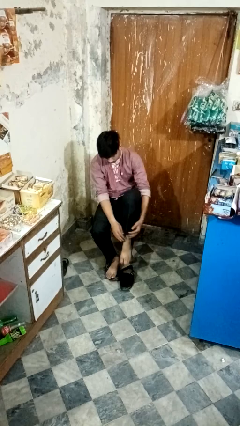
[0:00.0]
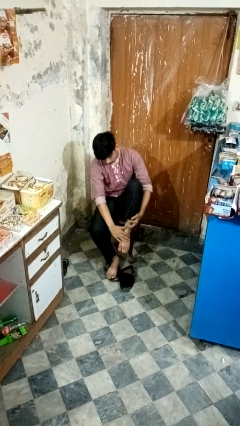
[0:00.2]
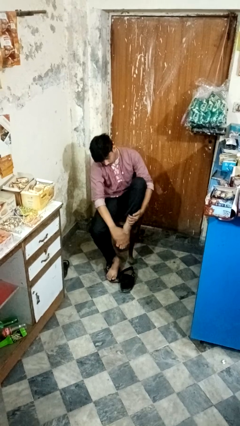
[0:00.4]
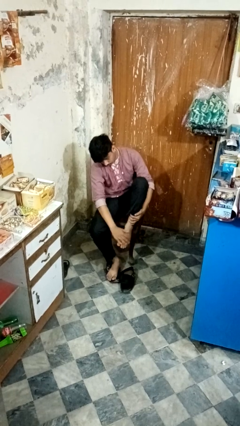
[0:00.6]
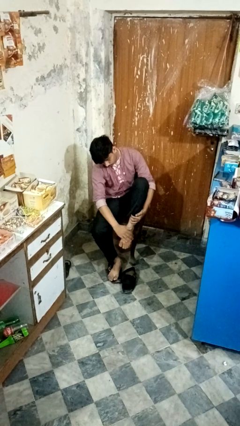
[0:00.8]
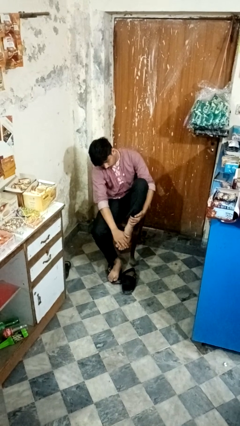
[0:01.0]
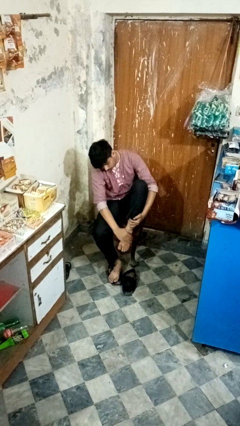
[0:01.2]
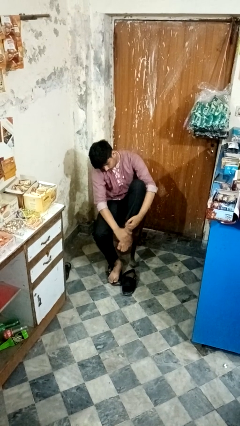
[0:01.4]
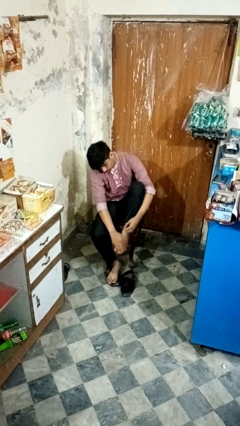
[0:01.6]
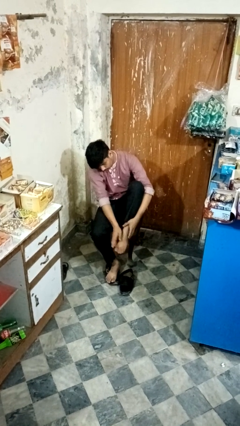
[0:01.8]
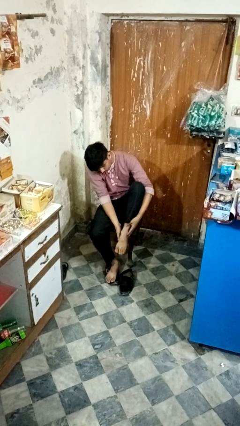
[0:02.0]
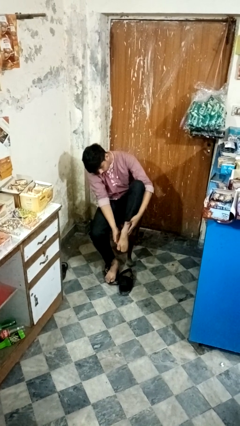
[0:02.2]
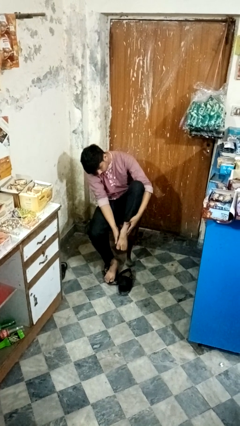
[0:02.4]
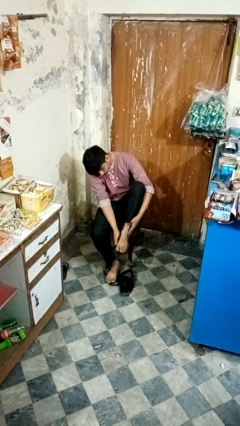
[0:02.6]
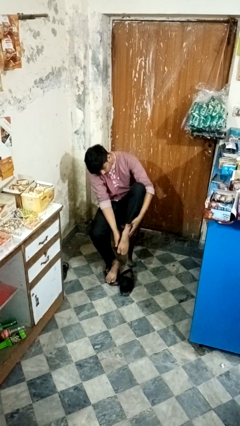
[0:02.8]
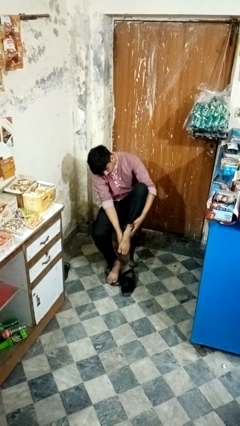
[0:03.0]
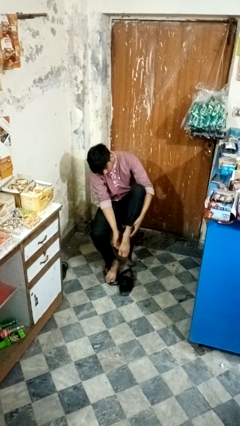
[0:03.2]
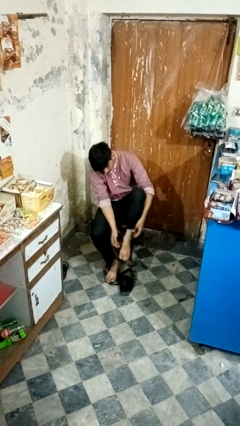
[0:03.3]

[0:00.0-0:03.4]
person rubs foot

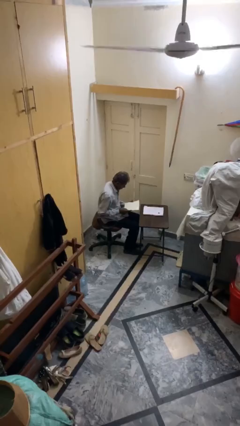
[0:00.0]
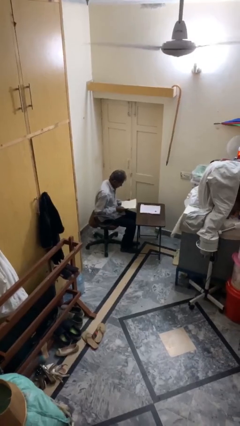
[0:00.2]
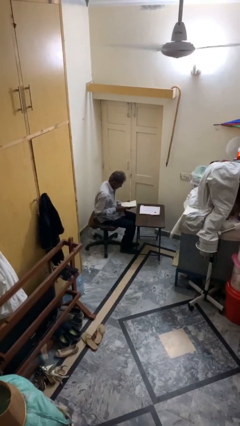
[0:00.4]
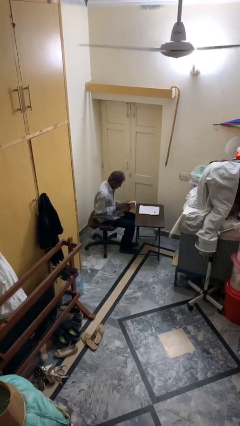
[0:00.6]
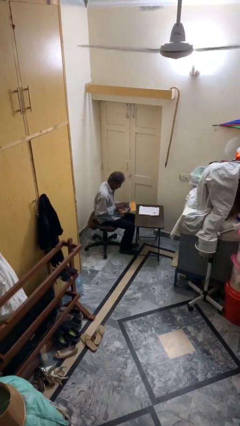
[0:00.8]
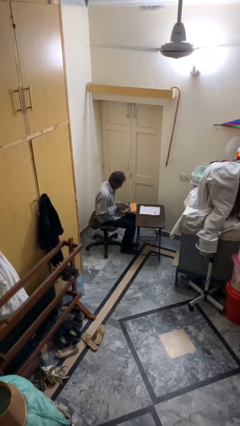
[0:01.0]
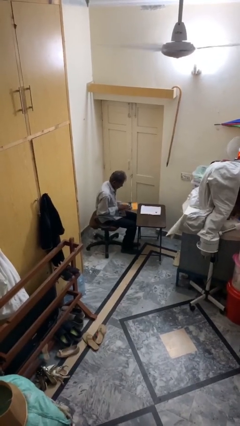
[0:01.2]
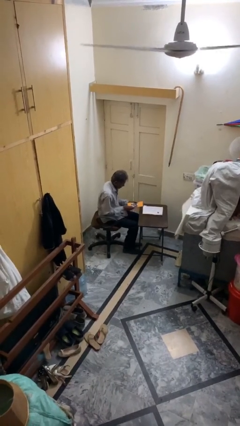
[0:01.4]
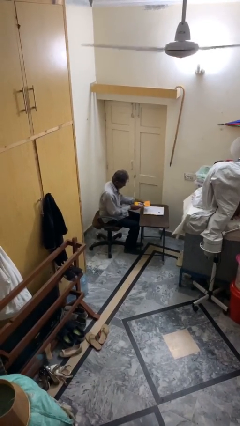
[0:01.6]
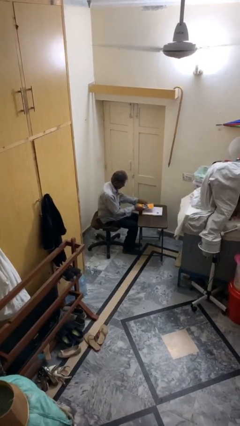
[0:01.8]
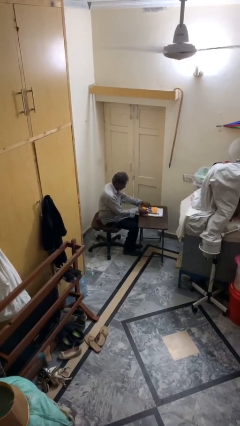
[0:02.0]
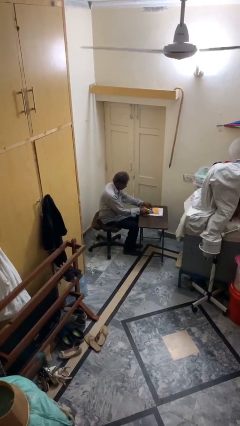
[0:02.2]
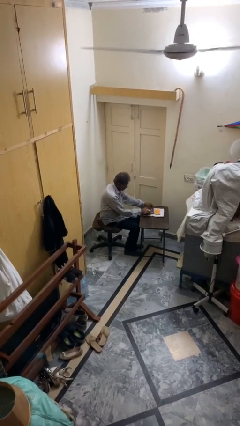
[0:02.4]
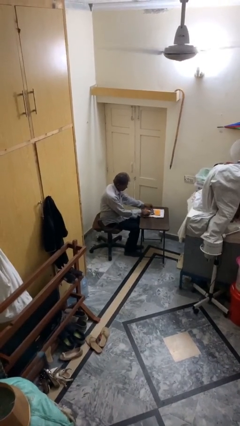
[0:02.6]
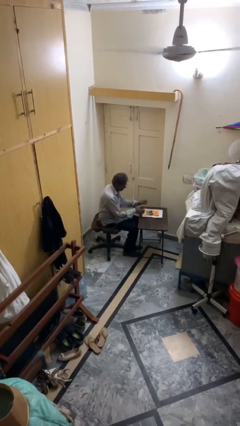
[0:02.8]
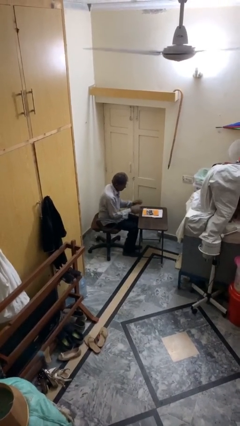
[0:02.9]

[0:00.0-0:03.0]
person puts down object on table

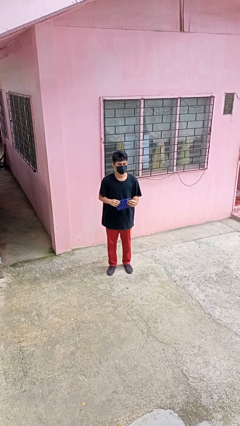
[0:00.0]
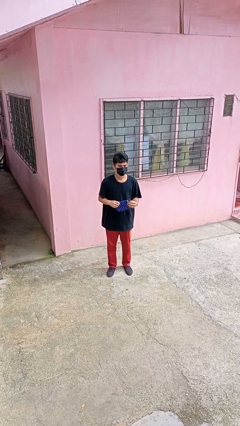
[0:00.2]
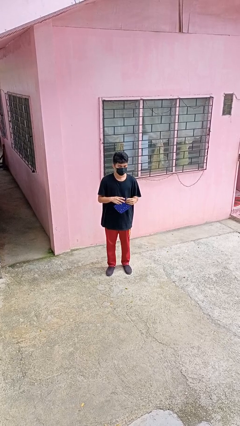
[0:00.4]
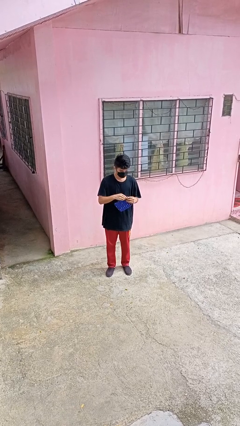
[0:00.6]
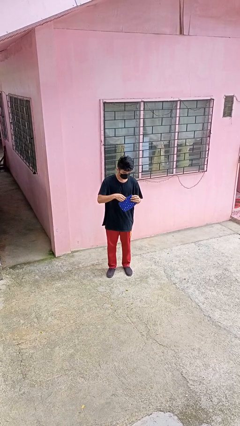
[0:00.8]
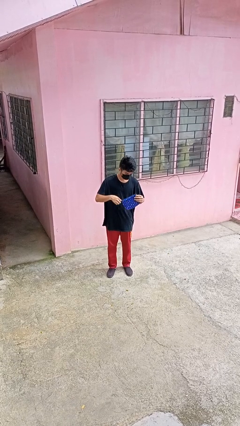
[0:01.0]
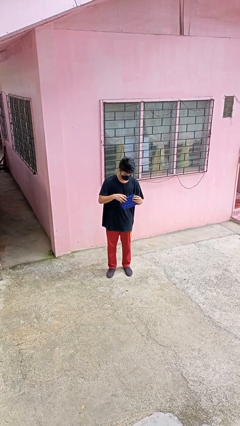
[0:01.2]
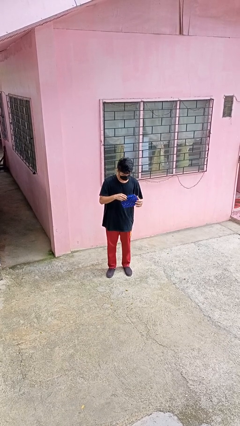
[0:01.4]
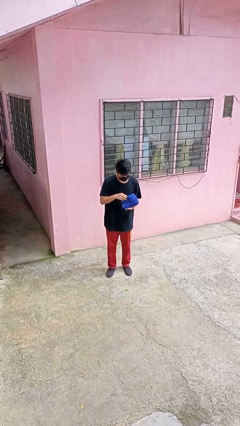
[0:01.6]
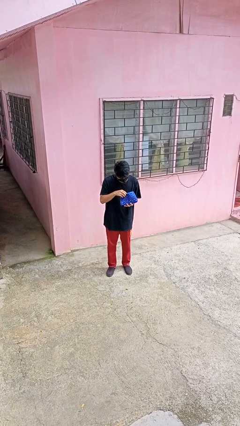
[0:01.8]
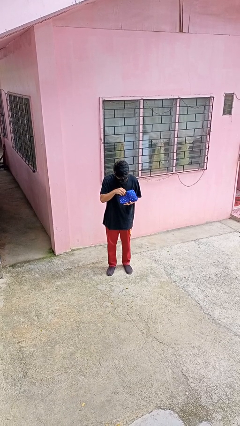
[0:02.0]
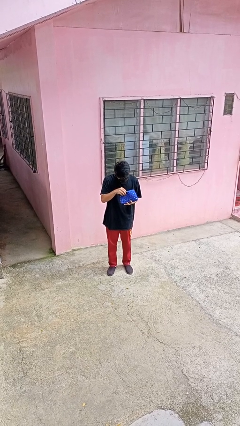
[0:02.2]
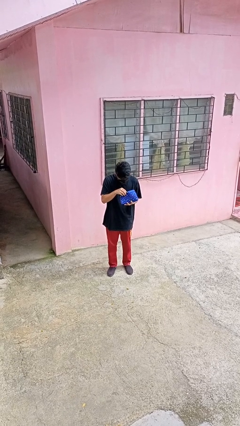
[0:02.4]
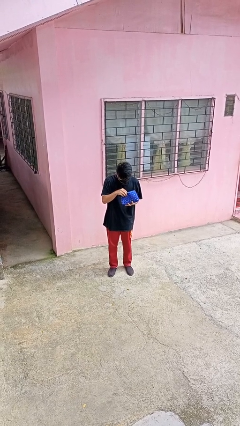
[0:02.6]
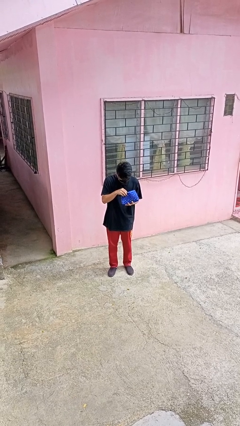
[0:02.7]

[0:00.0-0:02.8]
person searches in purse

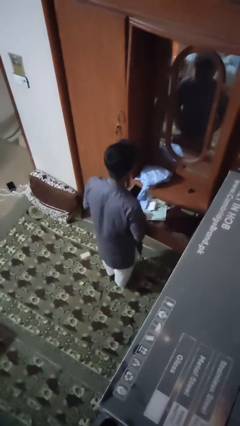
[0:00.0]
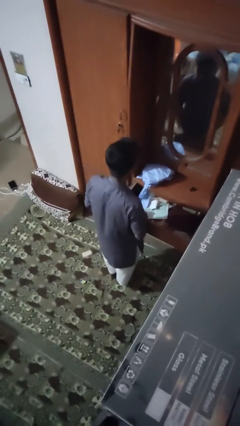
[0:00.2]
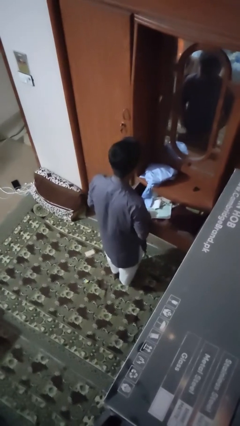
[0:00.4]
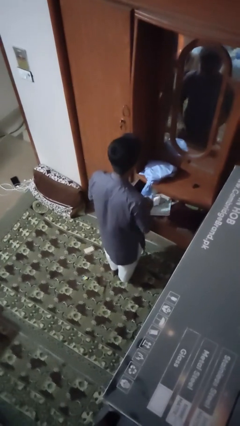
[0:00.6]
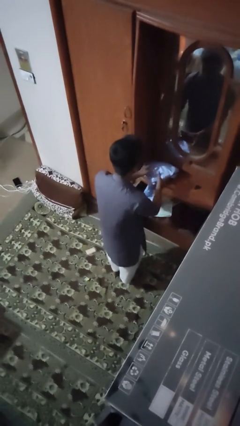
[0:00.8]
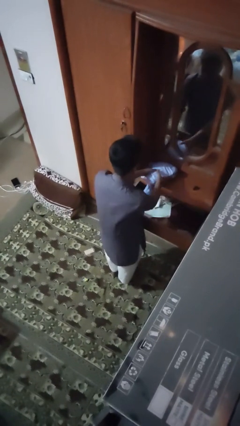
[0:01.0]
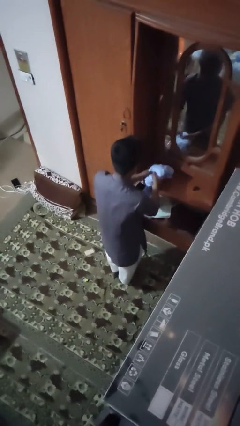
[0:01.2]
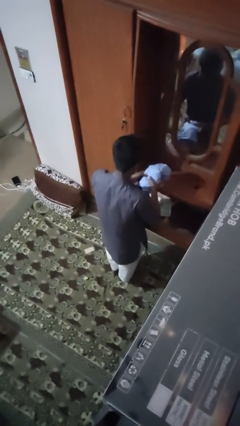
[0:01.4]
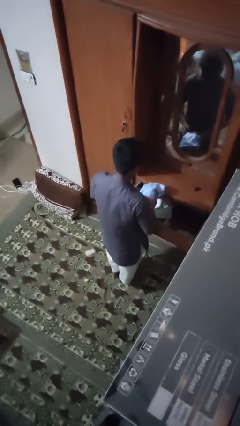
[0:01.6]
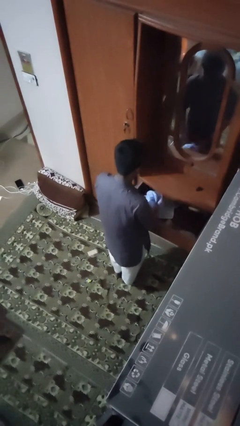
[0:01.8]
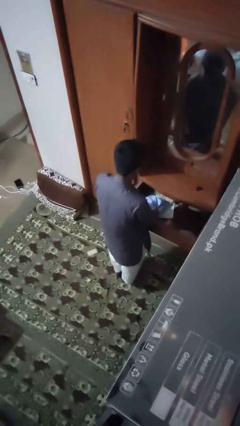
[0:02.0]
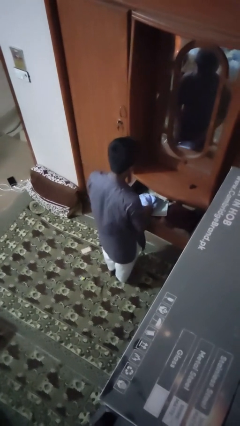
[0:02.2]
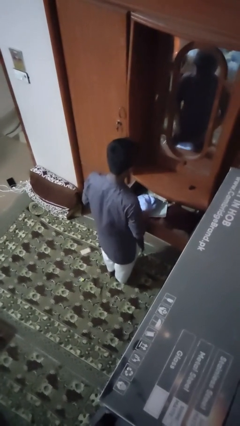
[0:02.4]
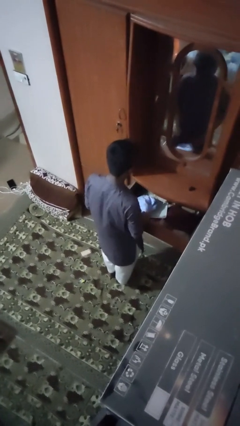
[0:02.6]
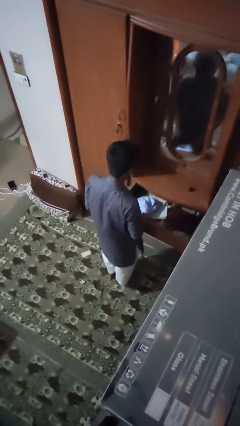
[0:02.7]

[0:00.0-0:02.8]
person puts clothes into dresser

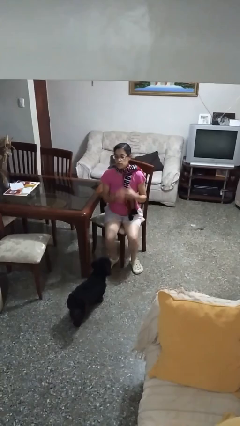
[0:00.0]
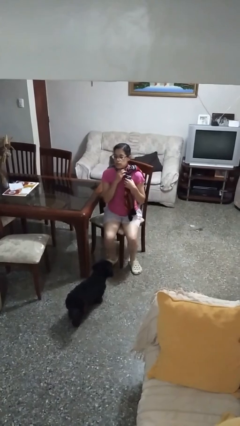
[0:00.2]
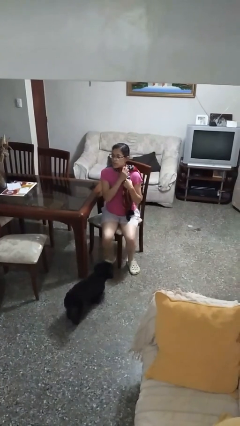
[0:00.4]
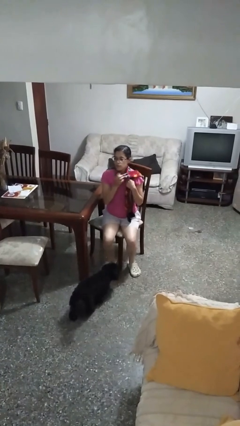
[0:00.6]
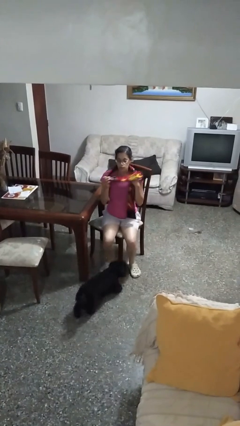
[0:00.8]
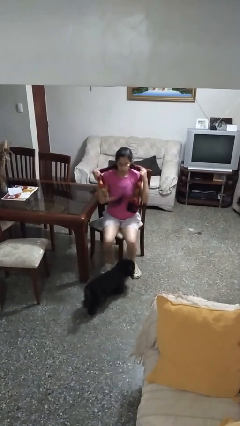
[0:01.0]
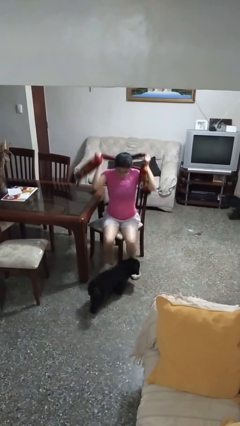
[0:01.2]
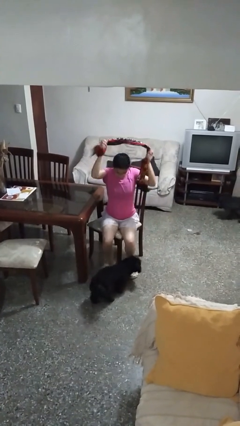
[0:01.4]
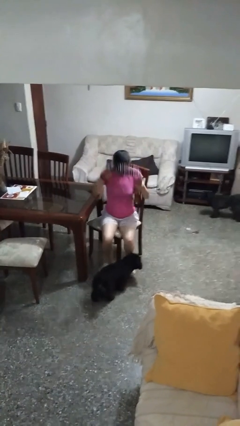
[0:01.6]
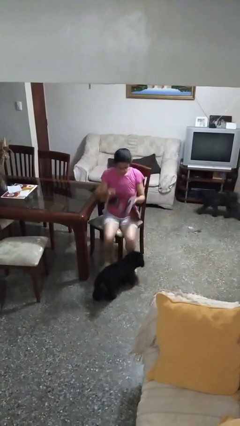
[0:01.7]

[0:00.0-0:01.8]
person takes off scarf

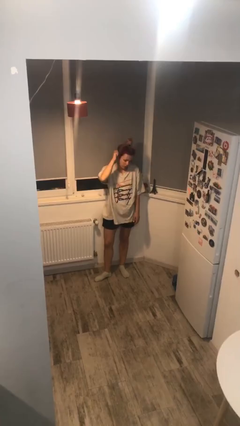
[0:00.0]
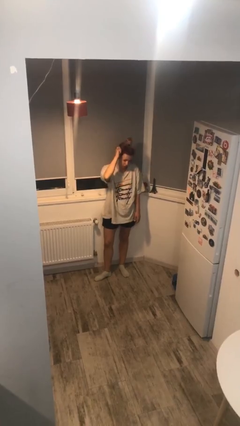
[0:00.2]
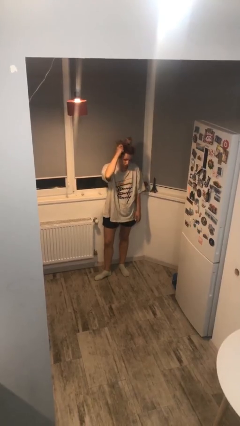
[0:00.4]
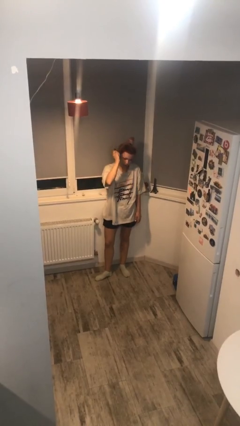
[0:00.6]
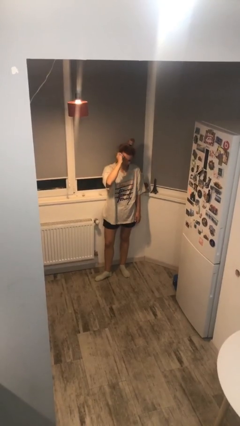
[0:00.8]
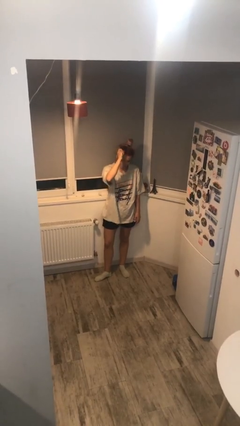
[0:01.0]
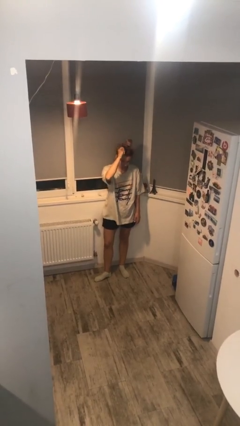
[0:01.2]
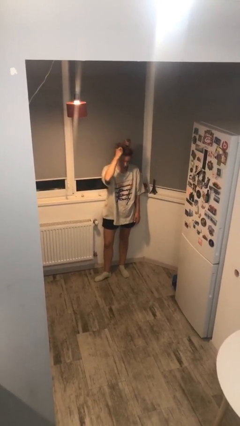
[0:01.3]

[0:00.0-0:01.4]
person brushes hair

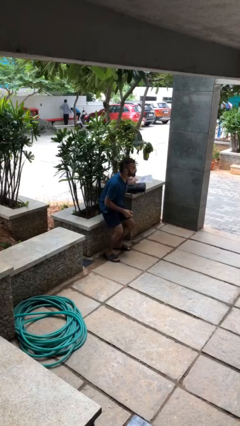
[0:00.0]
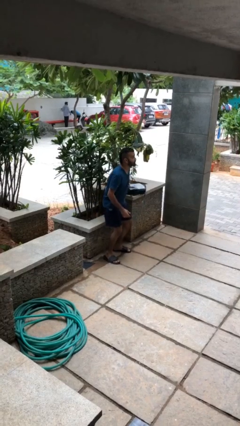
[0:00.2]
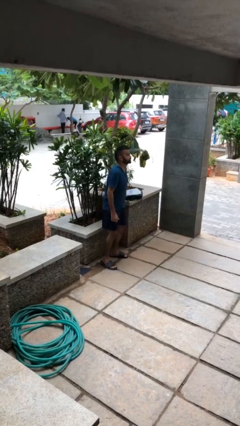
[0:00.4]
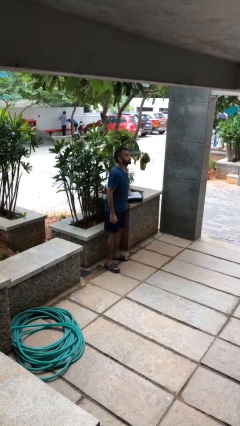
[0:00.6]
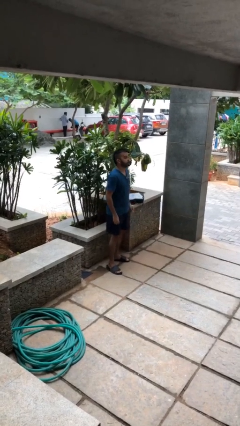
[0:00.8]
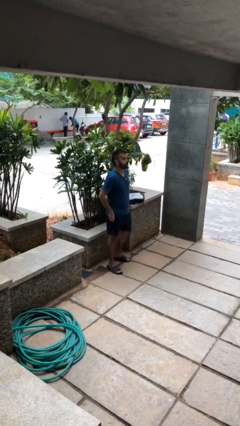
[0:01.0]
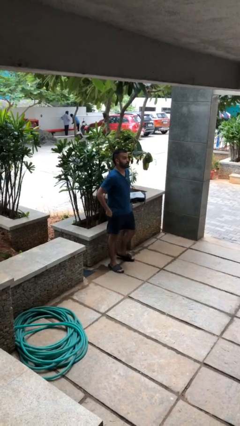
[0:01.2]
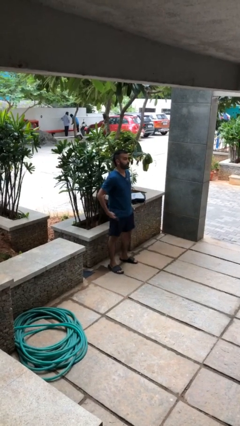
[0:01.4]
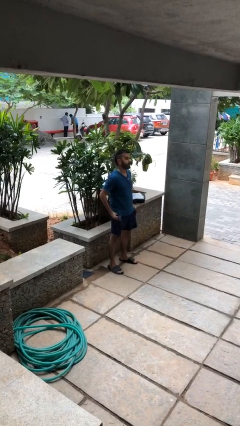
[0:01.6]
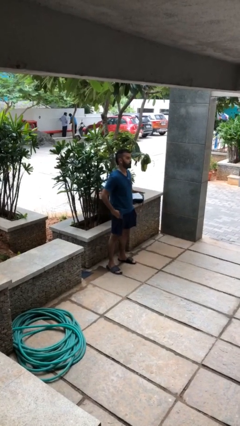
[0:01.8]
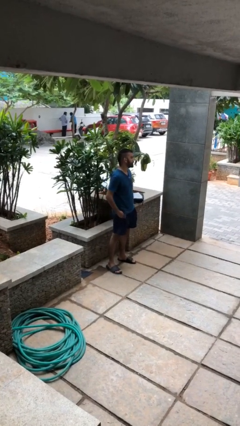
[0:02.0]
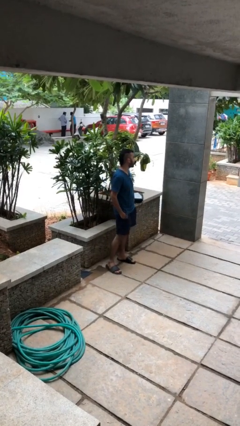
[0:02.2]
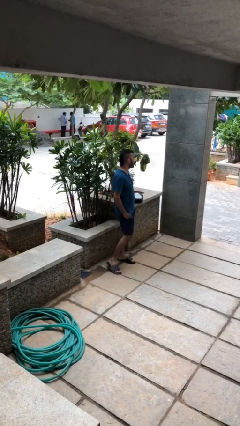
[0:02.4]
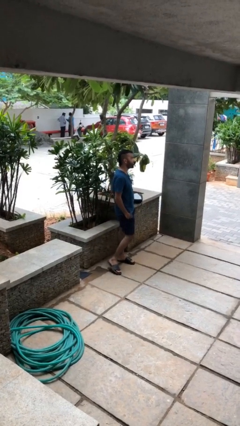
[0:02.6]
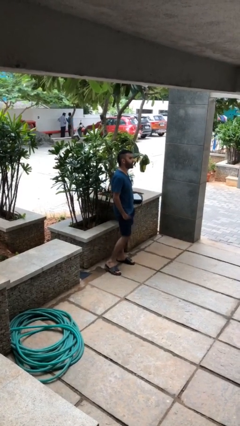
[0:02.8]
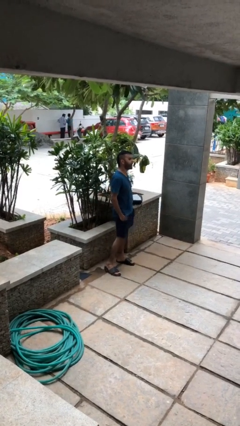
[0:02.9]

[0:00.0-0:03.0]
person stands up
